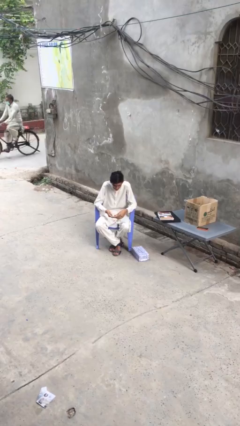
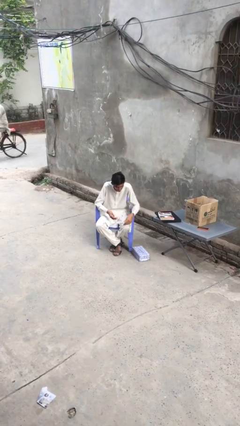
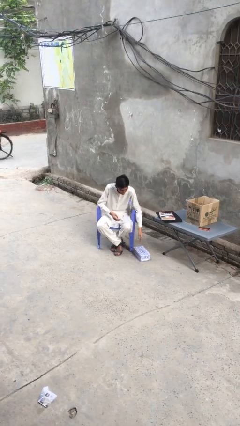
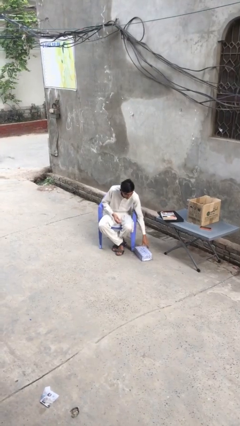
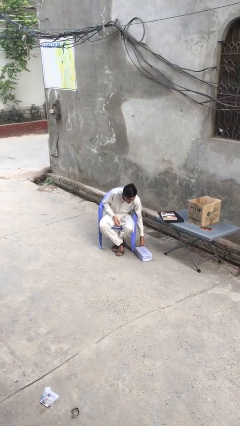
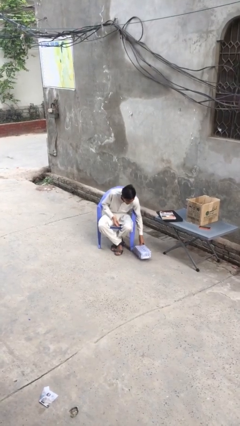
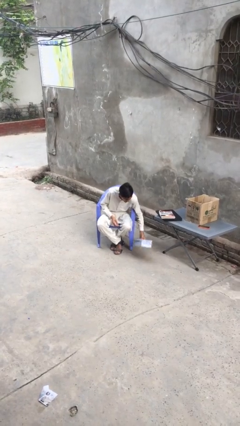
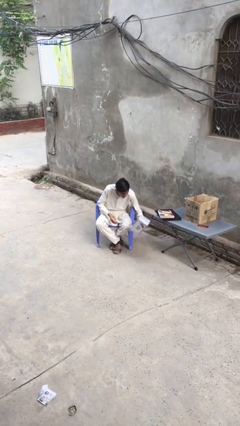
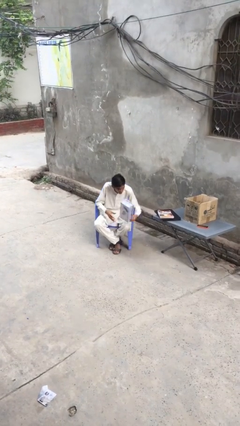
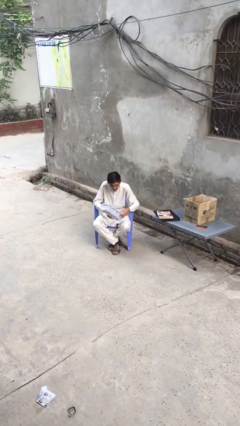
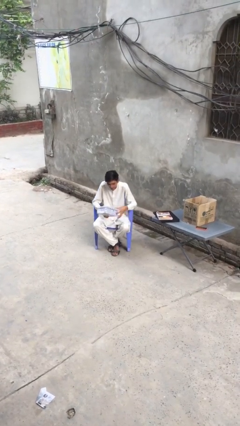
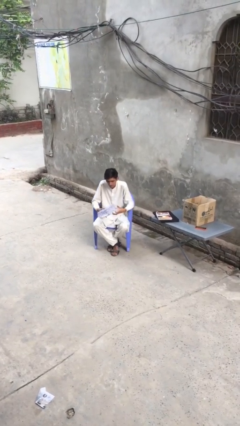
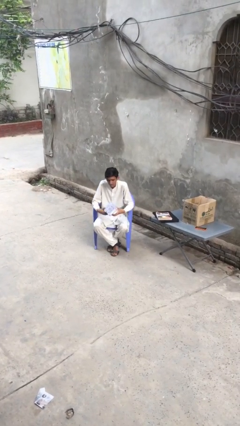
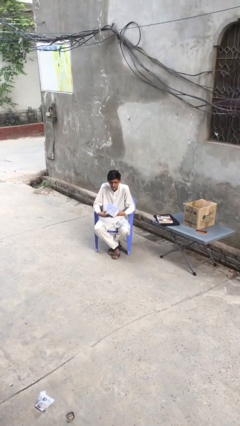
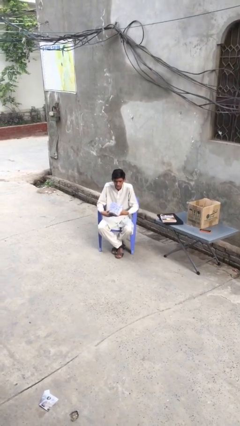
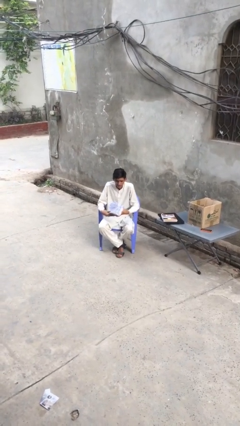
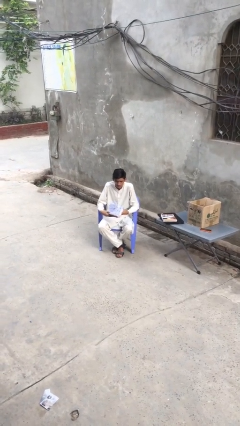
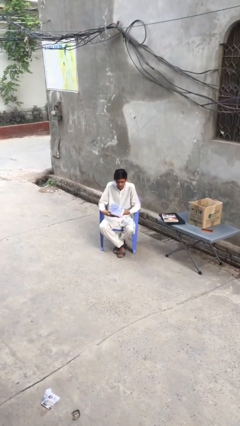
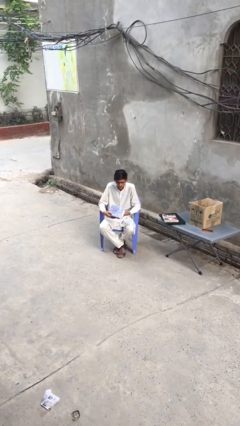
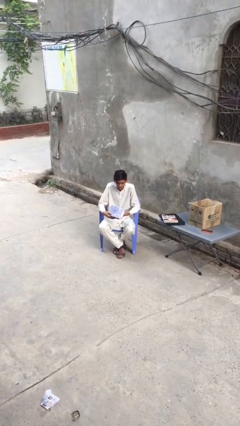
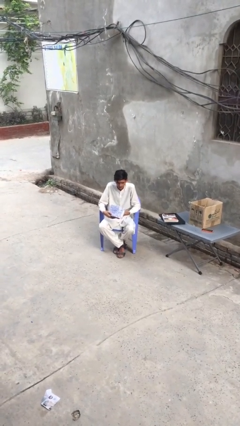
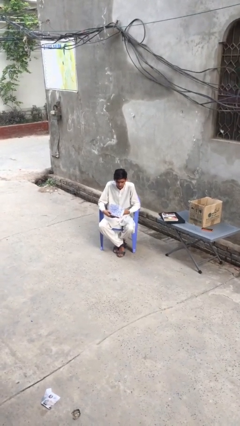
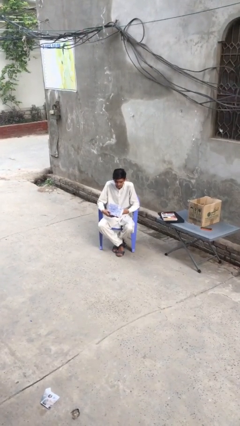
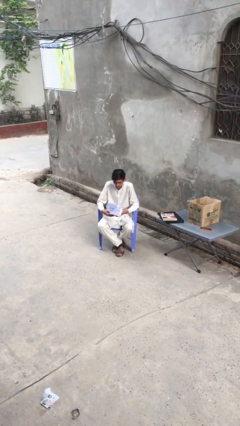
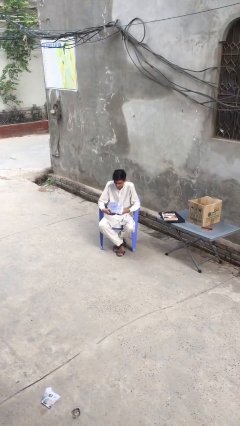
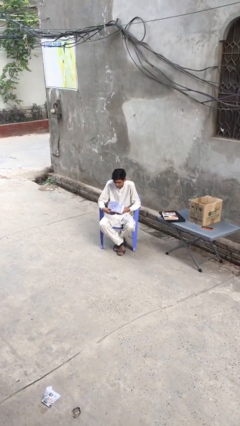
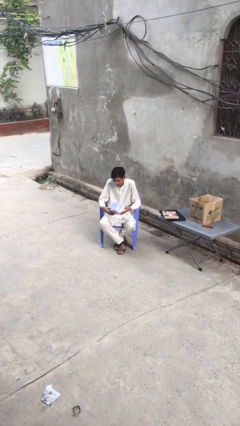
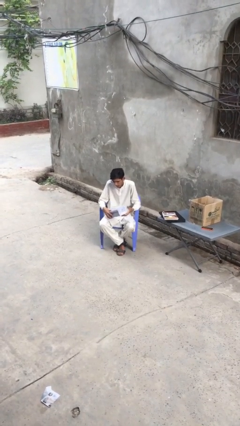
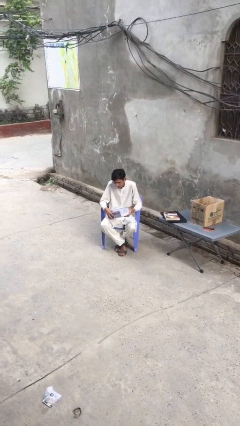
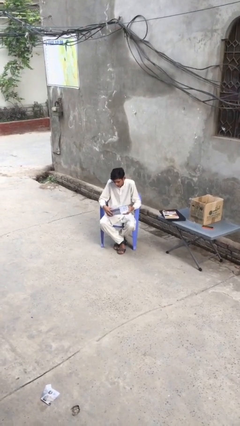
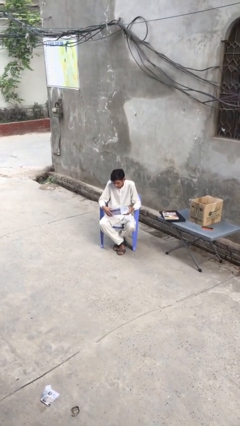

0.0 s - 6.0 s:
person picks up object from floor

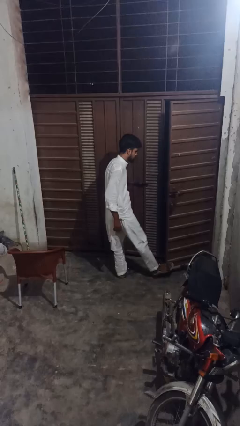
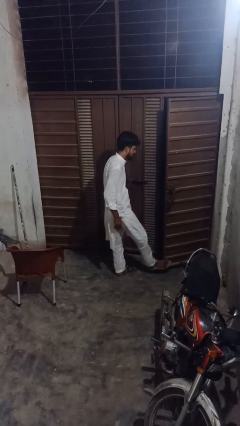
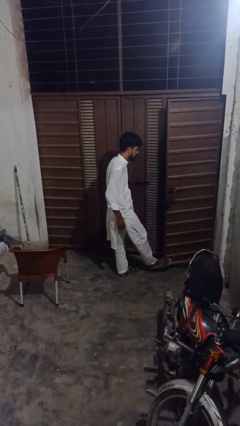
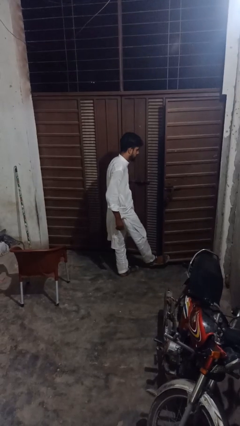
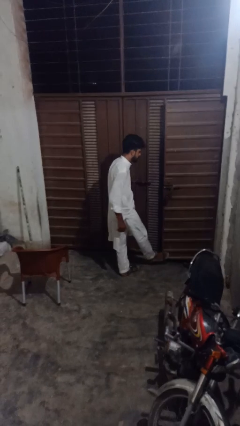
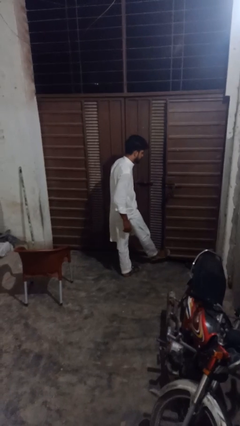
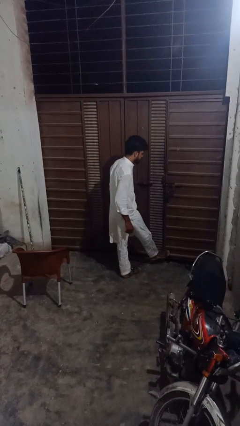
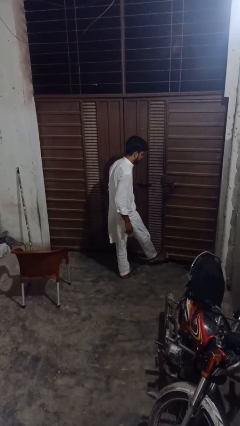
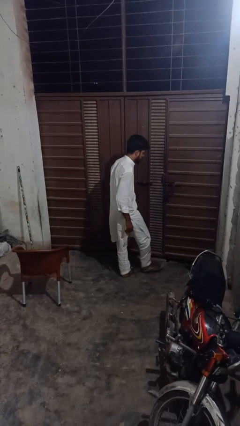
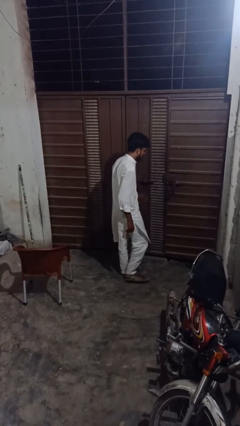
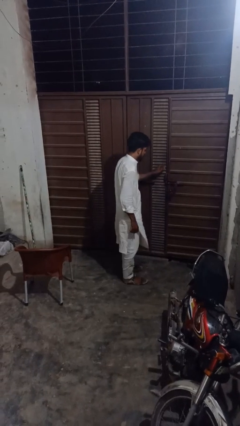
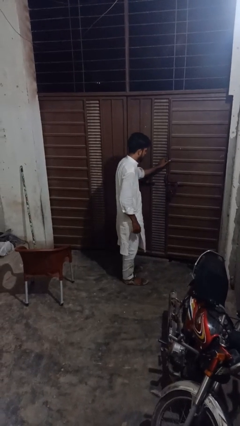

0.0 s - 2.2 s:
person closes door with foot

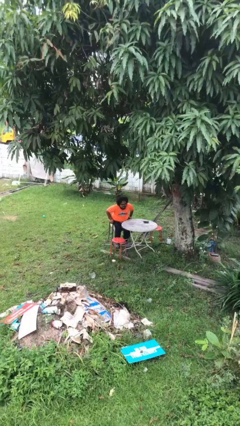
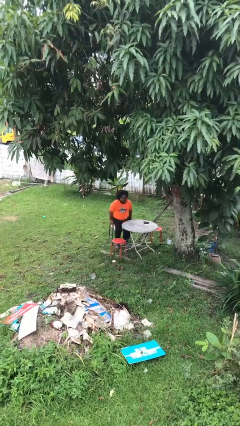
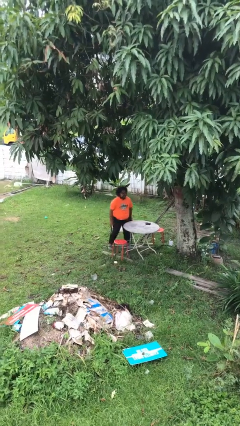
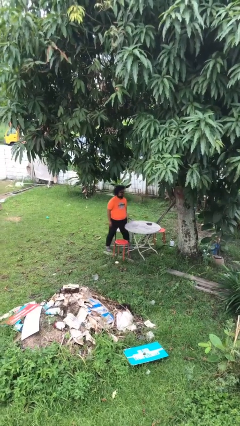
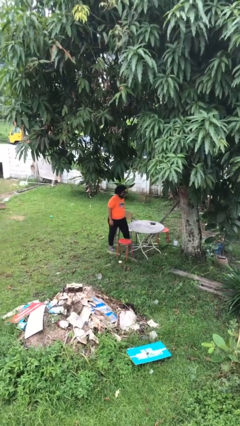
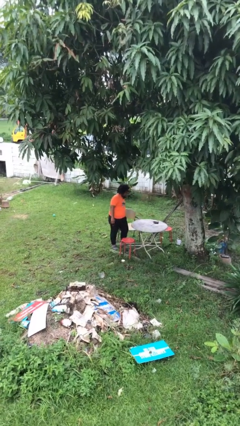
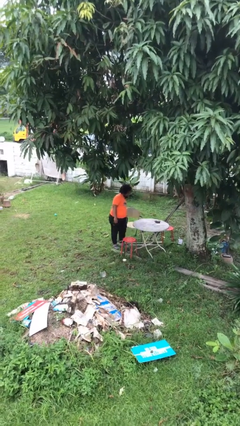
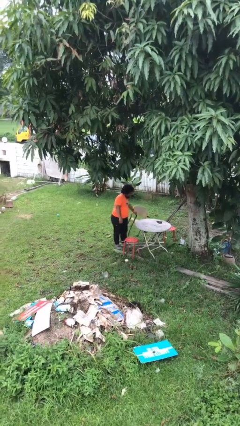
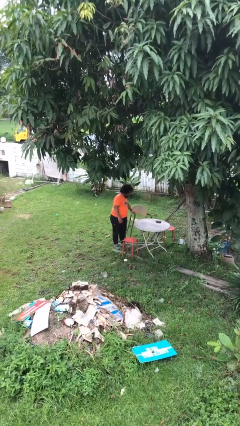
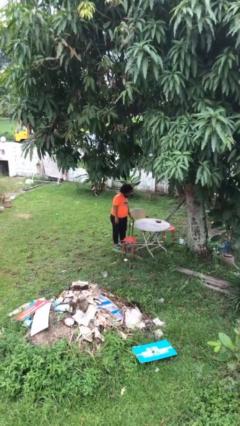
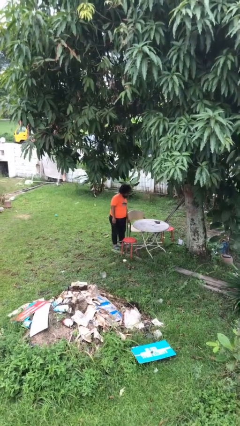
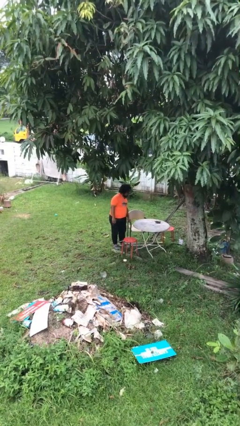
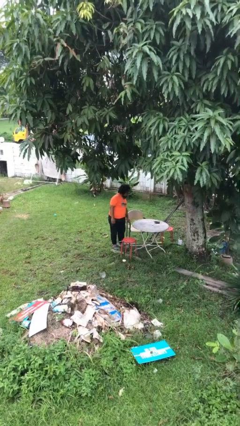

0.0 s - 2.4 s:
person stands up

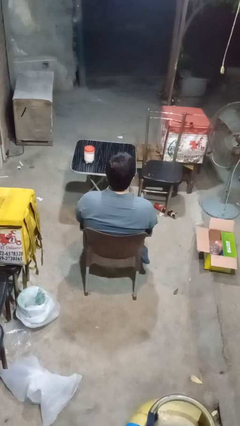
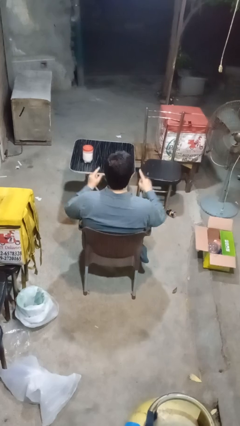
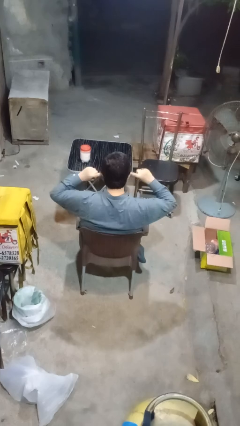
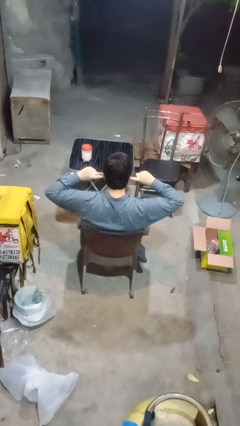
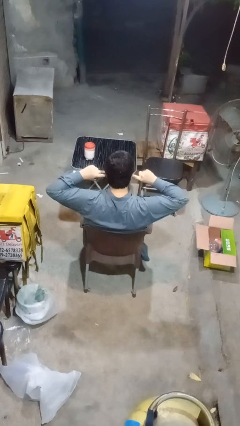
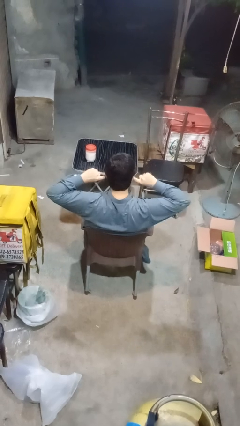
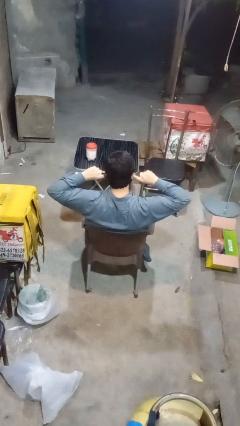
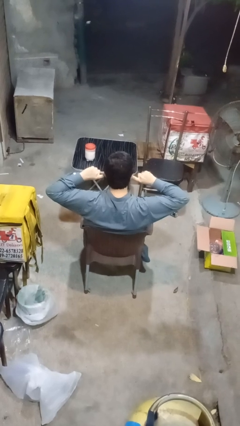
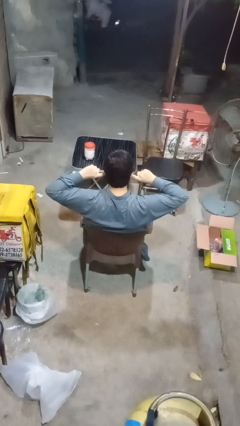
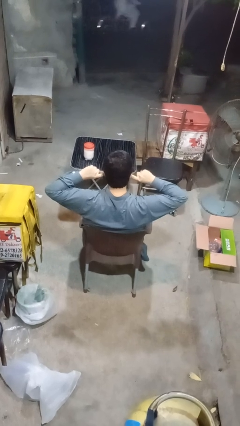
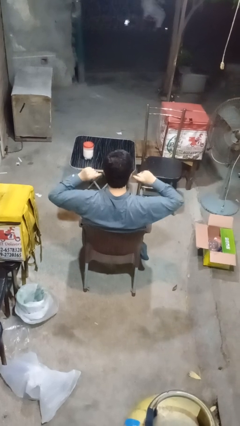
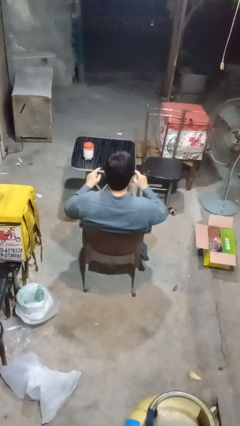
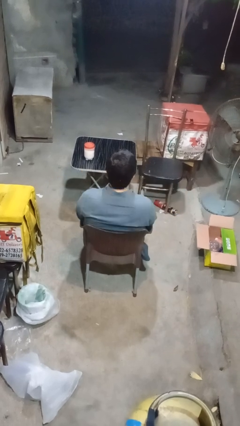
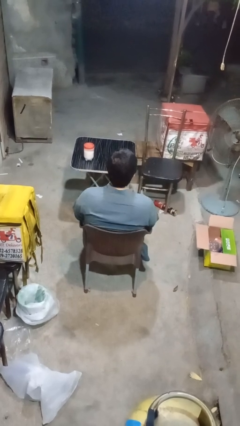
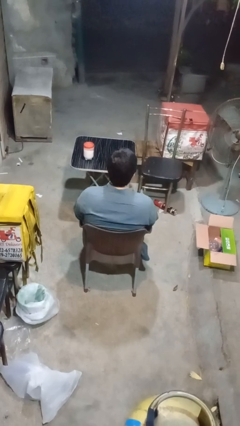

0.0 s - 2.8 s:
person puts fingers in ear

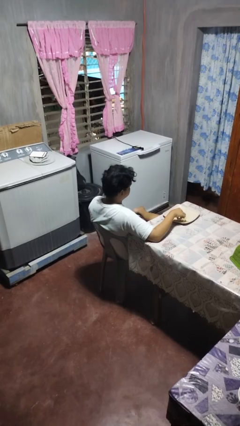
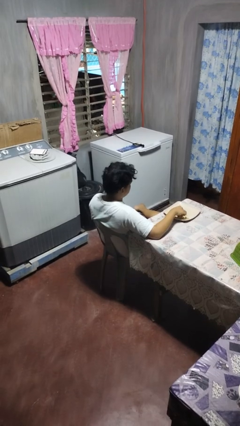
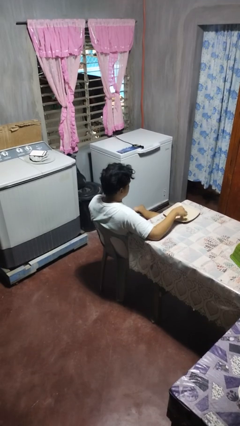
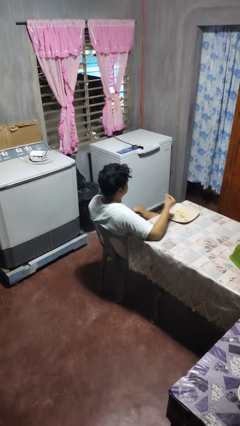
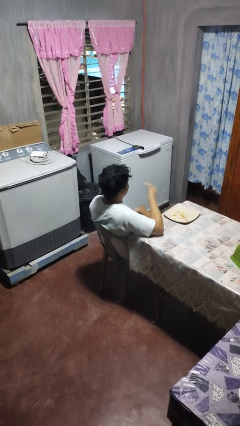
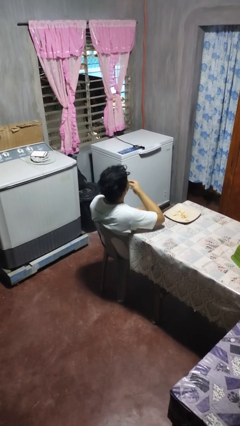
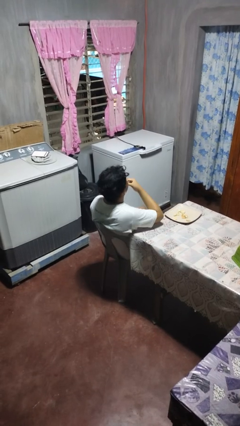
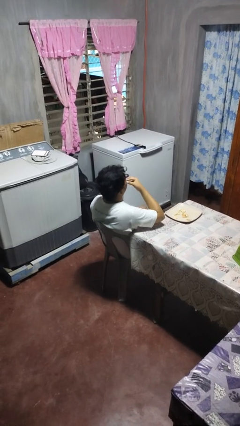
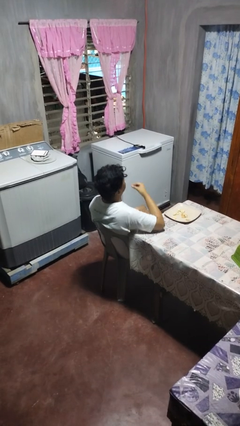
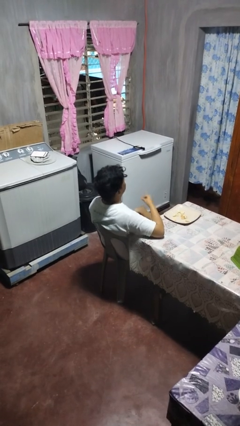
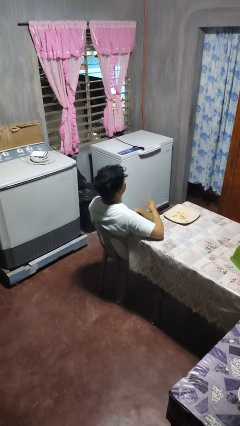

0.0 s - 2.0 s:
person eats with hands

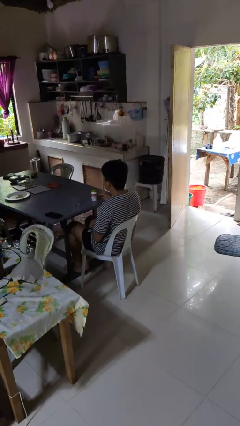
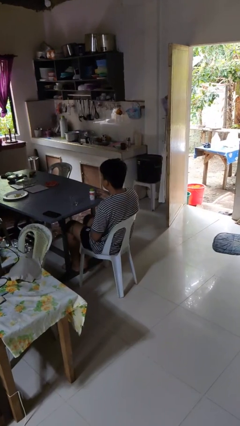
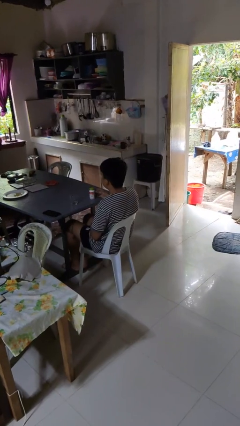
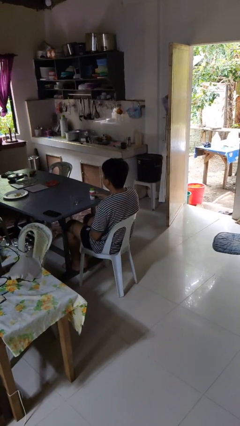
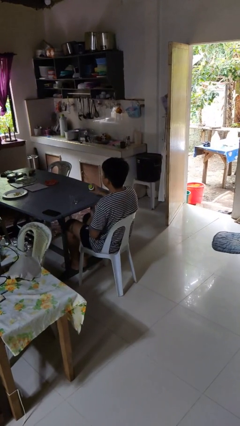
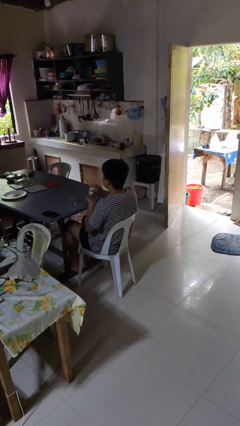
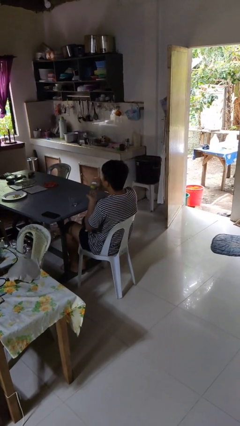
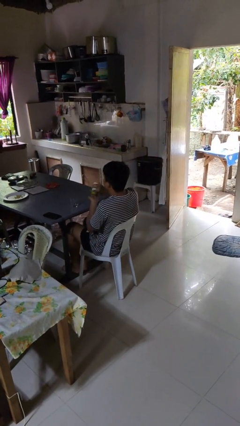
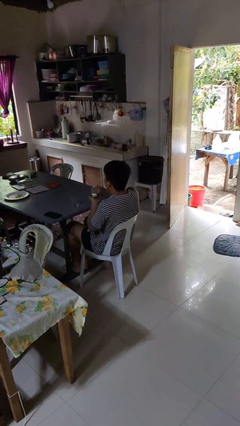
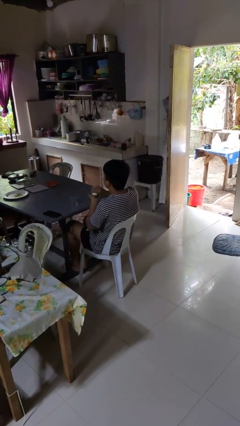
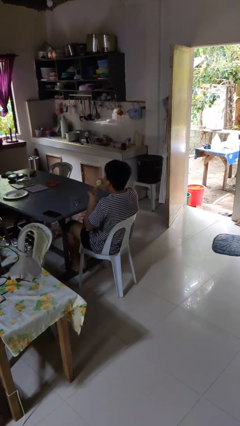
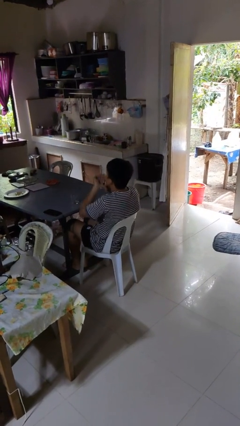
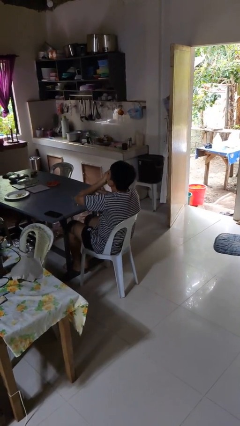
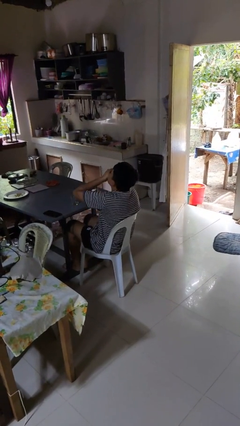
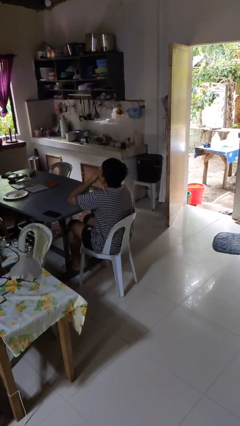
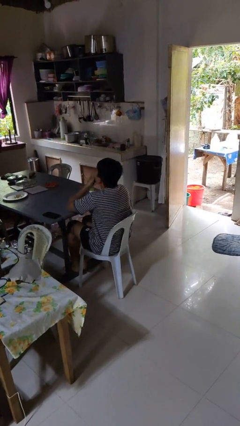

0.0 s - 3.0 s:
person takes medicine pills
